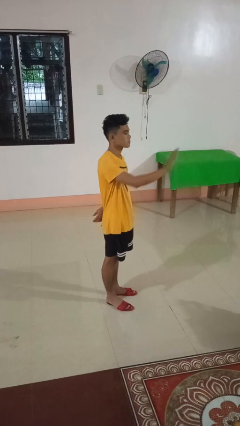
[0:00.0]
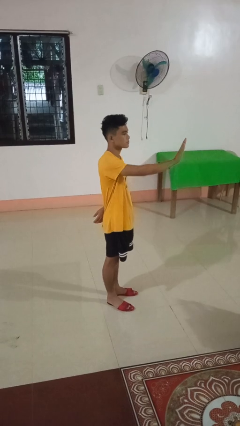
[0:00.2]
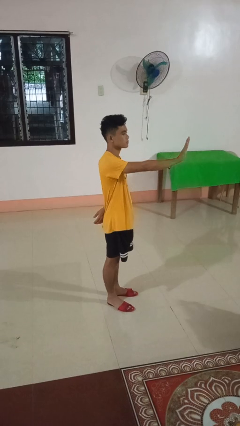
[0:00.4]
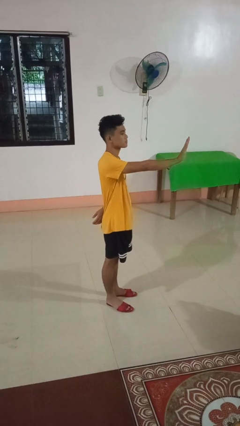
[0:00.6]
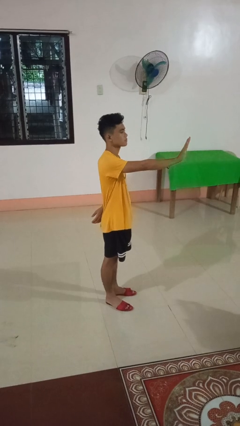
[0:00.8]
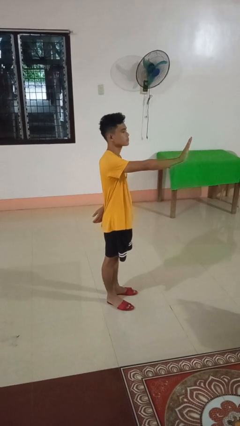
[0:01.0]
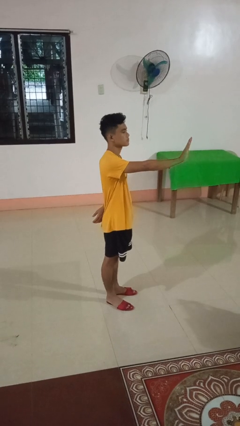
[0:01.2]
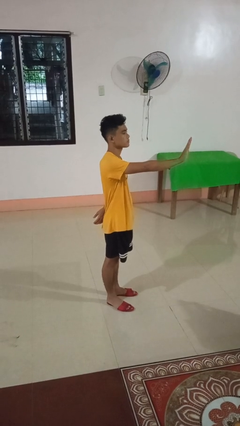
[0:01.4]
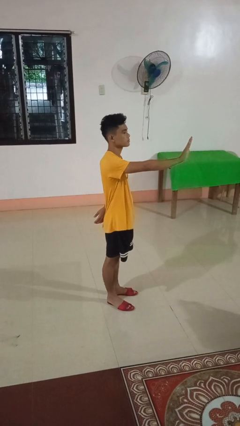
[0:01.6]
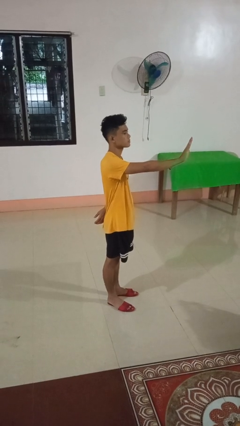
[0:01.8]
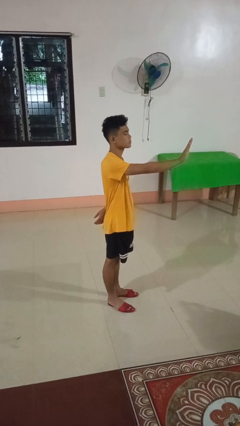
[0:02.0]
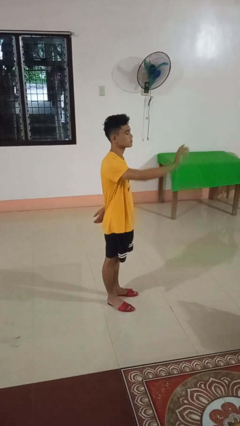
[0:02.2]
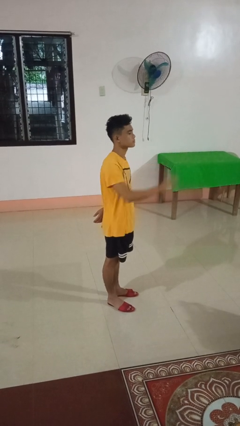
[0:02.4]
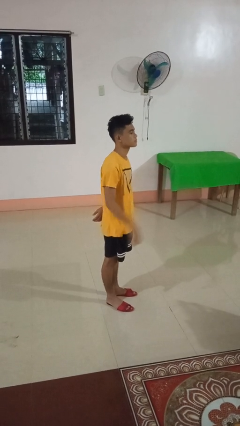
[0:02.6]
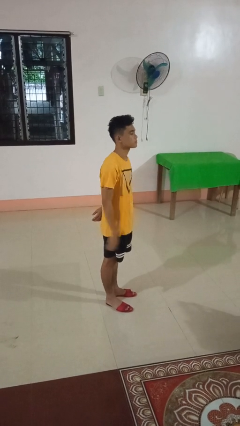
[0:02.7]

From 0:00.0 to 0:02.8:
person gestures stop

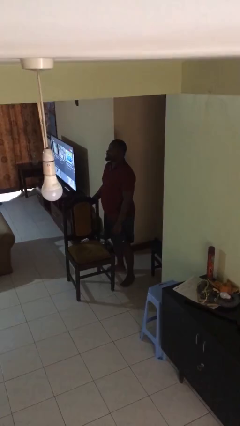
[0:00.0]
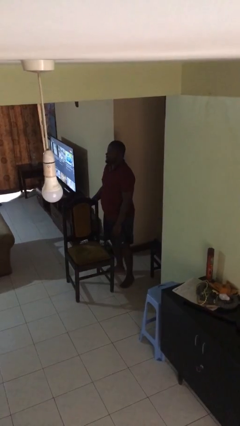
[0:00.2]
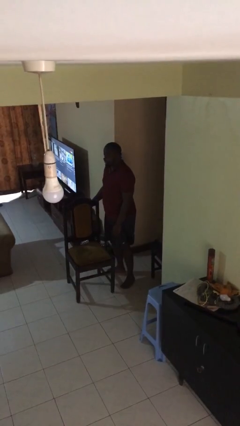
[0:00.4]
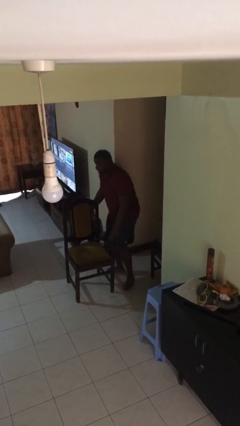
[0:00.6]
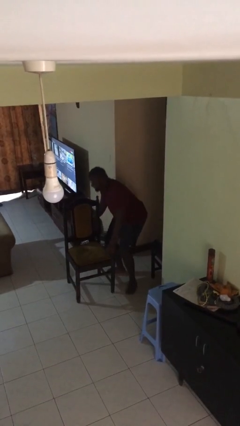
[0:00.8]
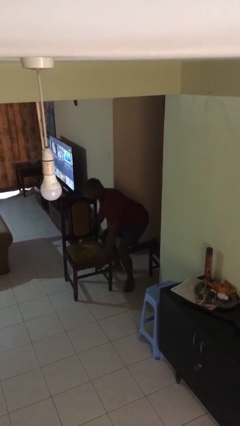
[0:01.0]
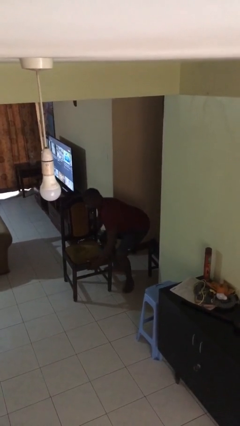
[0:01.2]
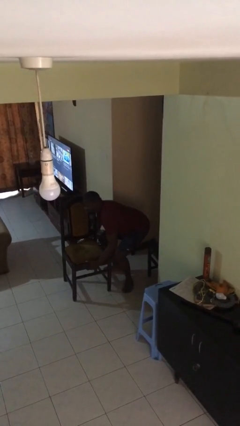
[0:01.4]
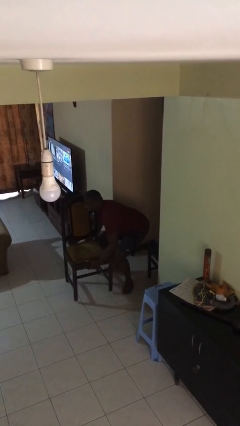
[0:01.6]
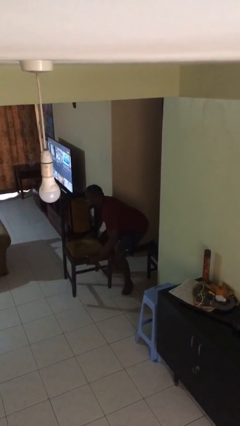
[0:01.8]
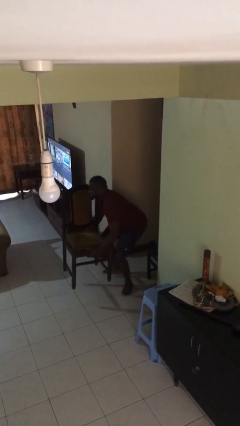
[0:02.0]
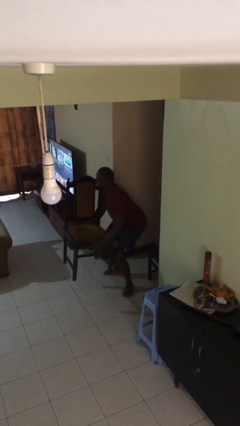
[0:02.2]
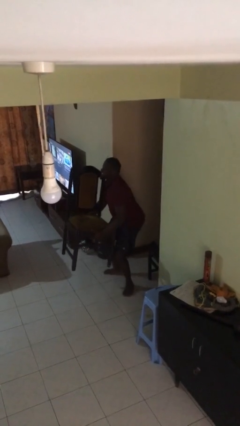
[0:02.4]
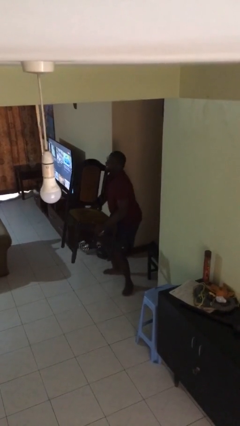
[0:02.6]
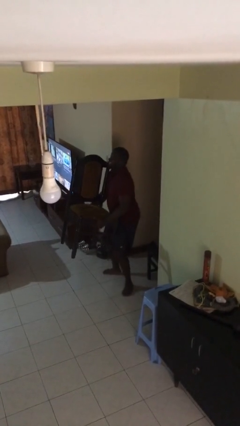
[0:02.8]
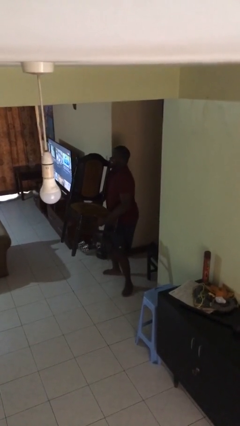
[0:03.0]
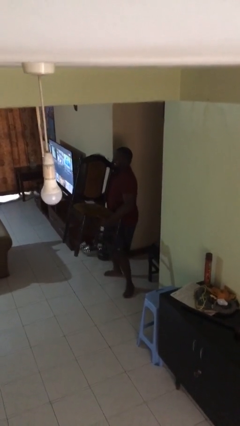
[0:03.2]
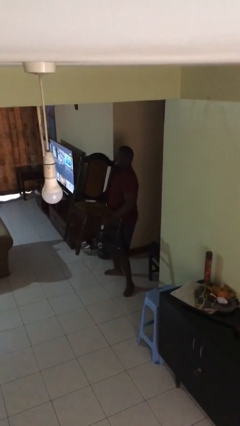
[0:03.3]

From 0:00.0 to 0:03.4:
person picks up object from floor

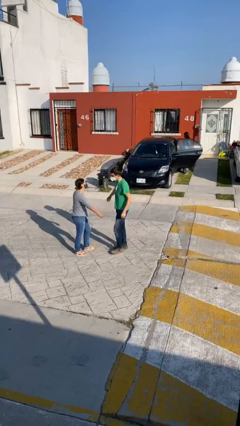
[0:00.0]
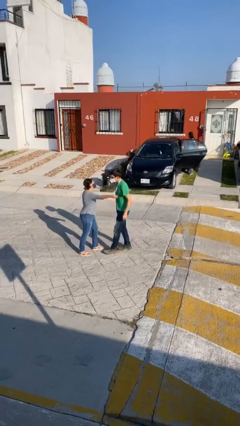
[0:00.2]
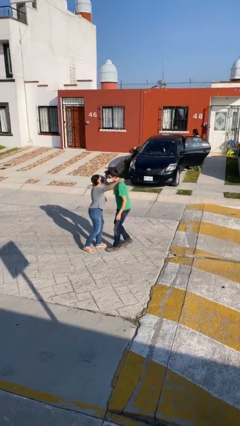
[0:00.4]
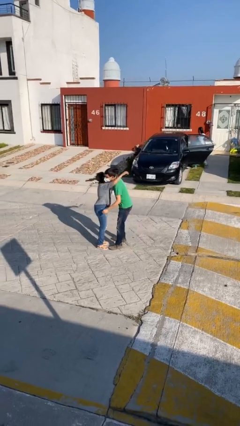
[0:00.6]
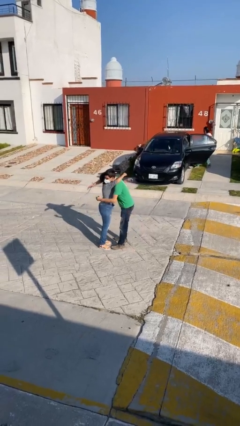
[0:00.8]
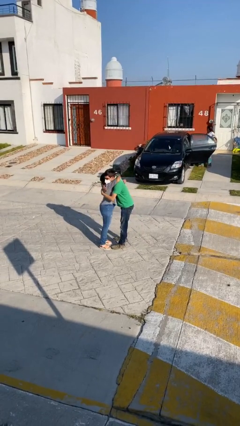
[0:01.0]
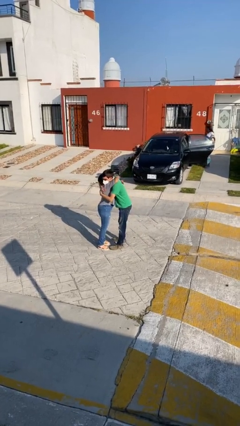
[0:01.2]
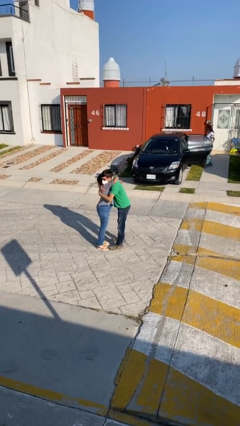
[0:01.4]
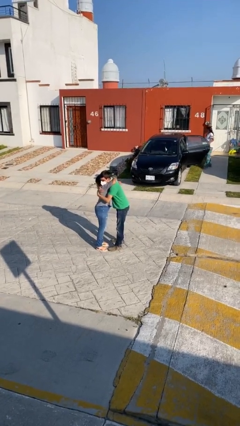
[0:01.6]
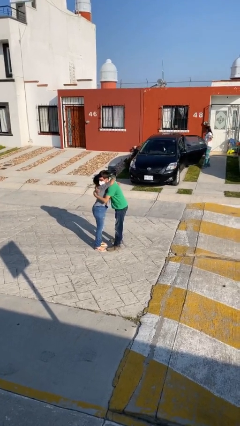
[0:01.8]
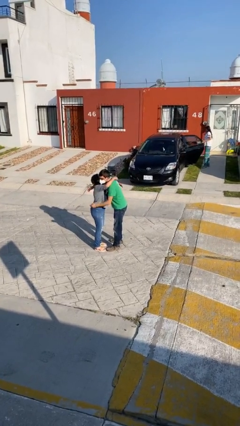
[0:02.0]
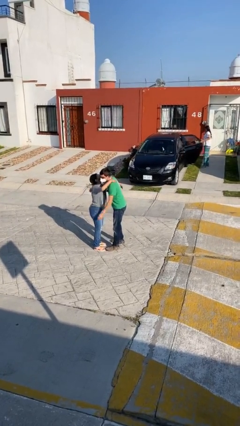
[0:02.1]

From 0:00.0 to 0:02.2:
person embraces person

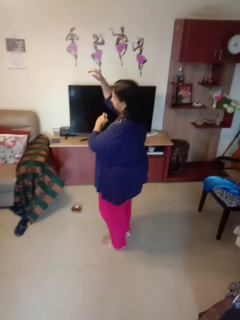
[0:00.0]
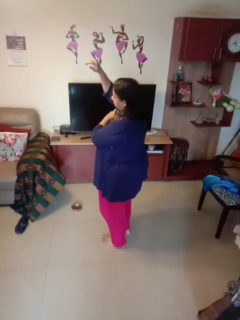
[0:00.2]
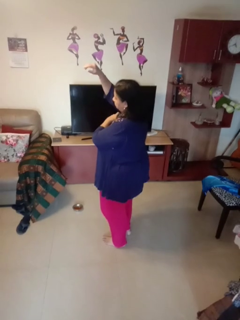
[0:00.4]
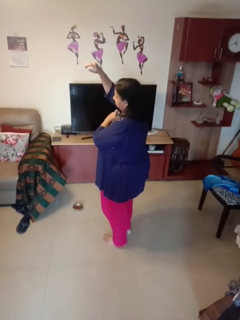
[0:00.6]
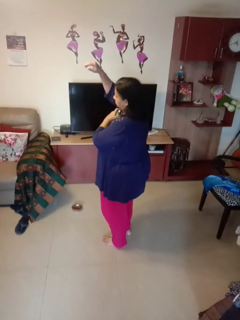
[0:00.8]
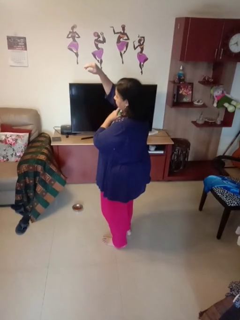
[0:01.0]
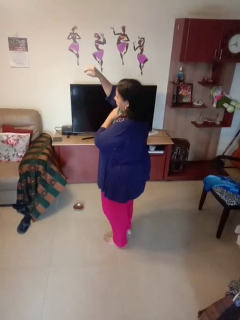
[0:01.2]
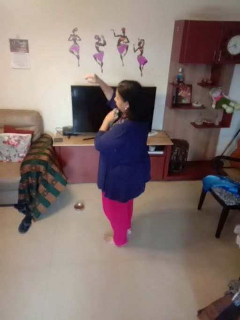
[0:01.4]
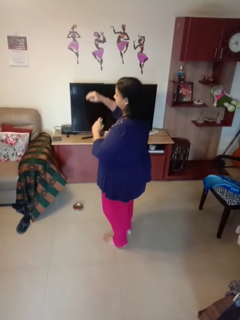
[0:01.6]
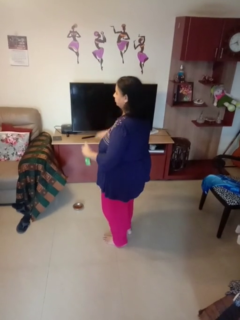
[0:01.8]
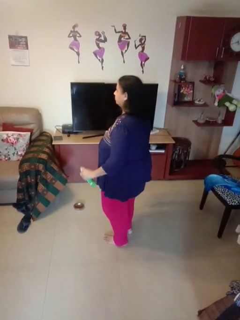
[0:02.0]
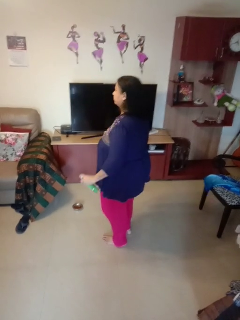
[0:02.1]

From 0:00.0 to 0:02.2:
person applies deodorant

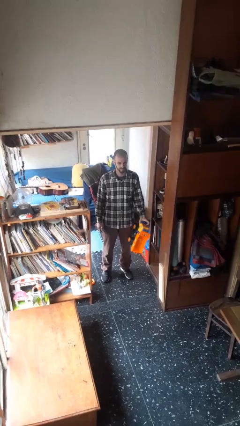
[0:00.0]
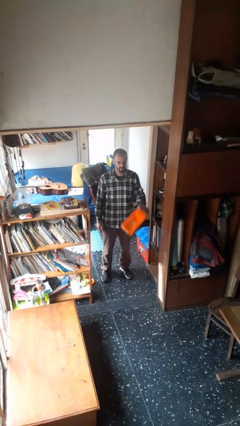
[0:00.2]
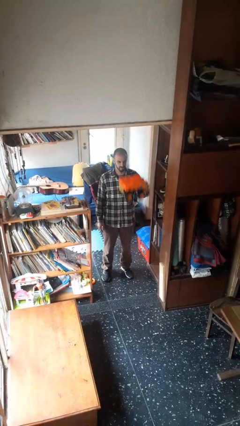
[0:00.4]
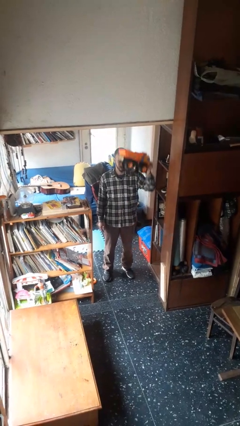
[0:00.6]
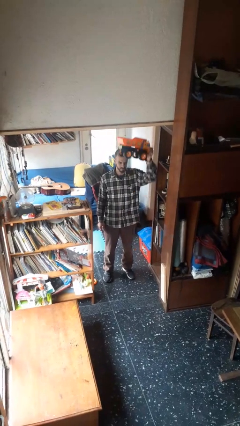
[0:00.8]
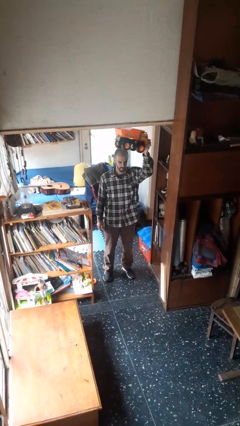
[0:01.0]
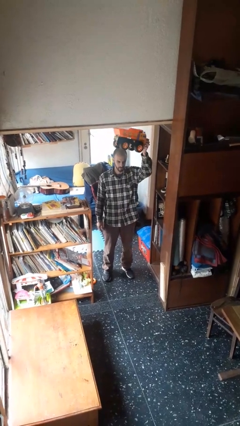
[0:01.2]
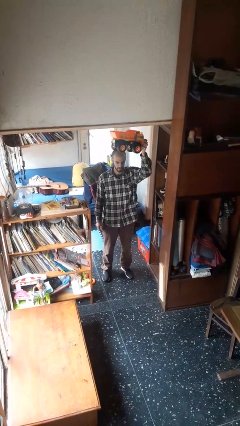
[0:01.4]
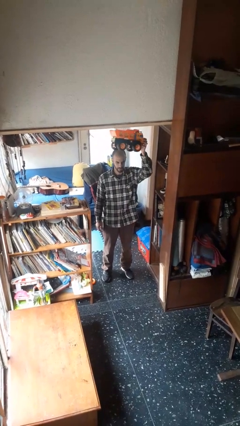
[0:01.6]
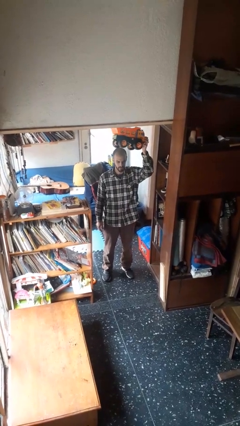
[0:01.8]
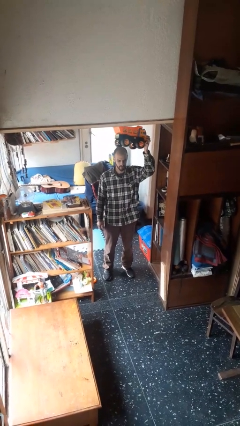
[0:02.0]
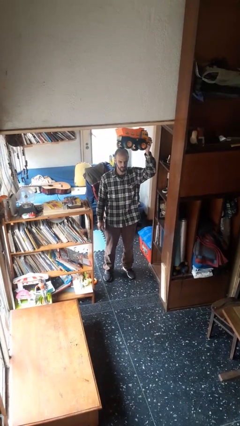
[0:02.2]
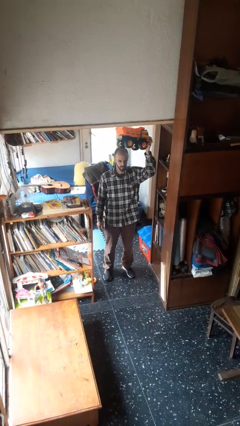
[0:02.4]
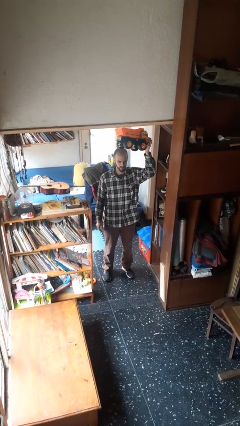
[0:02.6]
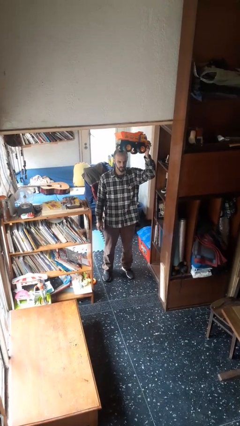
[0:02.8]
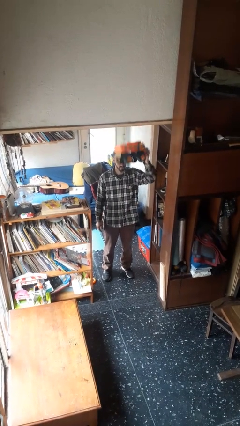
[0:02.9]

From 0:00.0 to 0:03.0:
person holds object above head

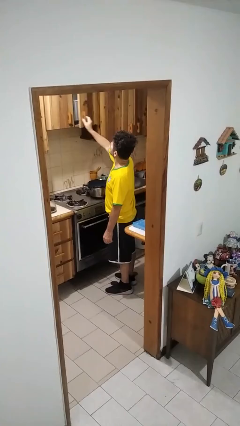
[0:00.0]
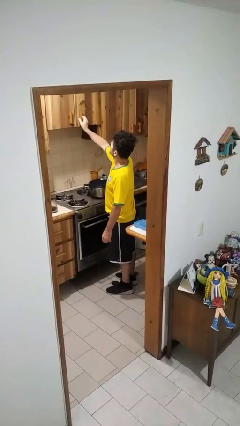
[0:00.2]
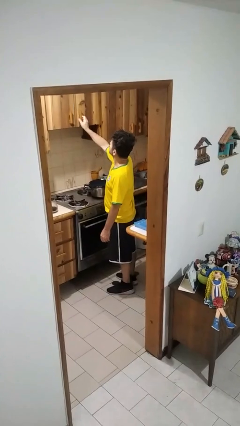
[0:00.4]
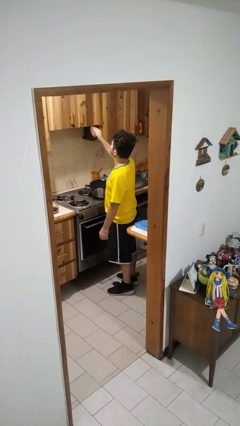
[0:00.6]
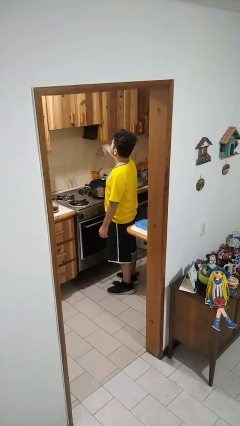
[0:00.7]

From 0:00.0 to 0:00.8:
person closes cabinet

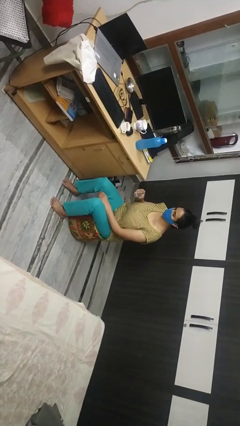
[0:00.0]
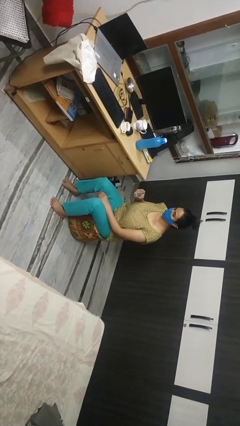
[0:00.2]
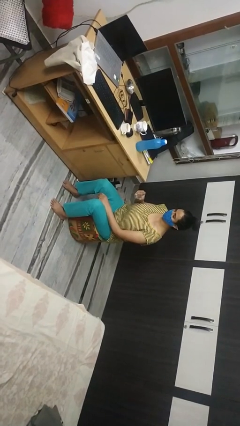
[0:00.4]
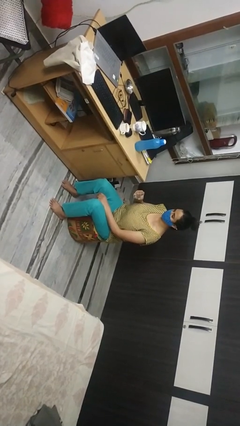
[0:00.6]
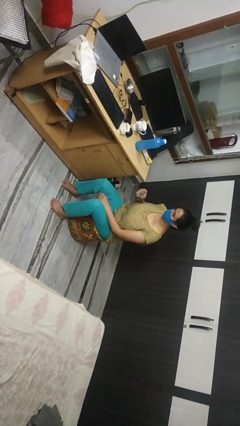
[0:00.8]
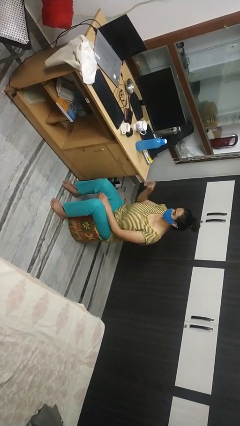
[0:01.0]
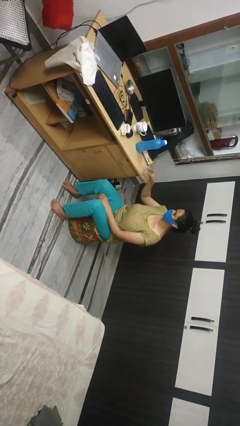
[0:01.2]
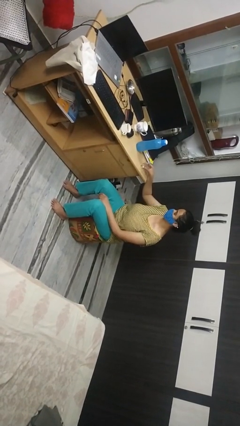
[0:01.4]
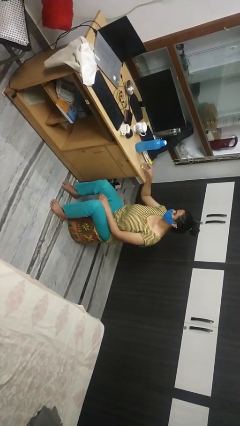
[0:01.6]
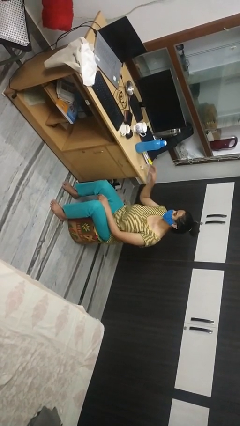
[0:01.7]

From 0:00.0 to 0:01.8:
person puts down object on table

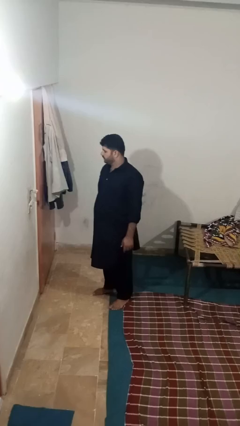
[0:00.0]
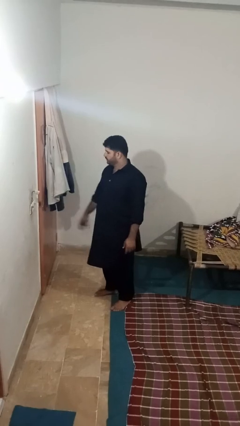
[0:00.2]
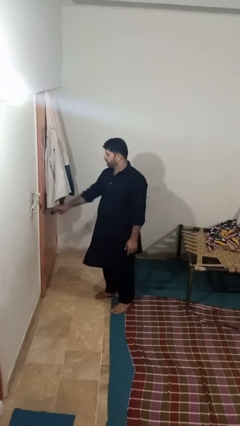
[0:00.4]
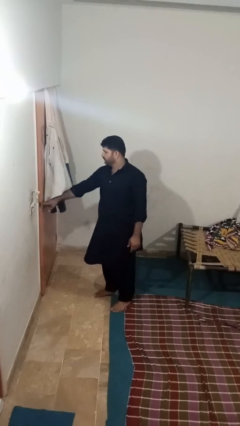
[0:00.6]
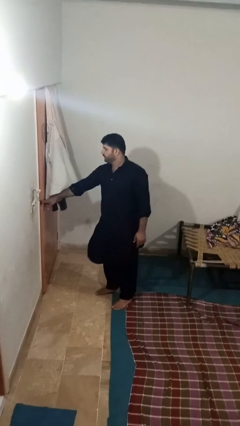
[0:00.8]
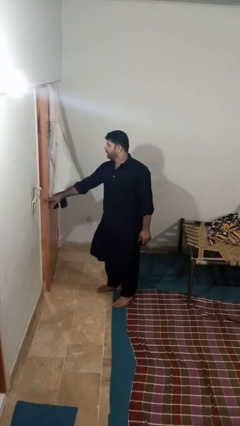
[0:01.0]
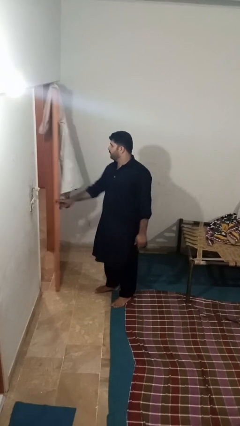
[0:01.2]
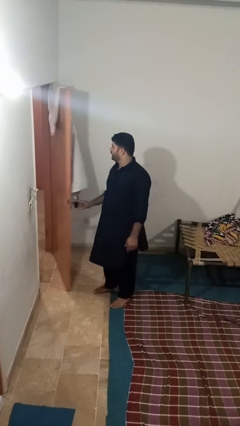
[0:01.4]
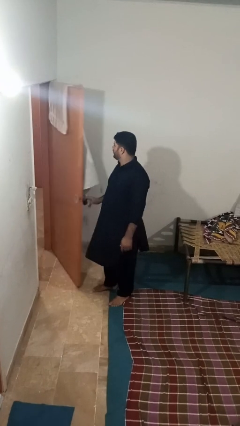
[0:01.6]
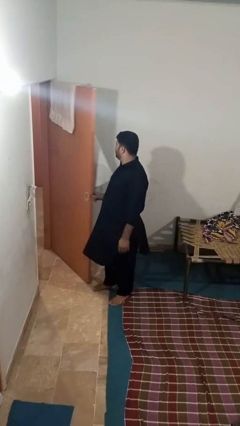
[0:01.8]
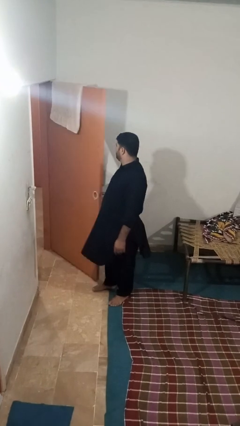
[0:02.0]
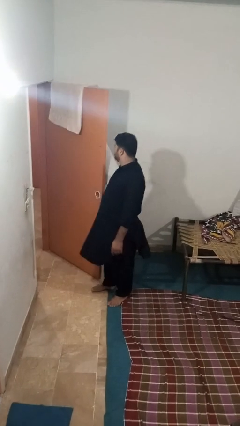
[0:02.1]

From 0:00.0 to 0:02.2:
person opens gate
